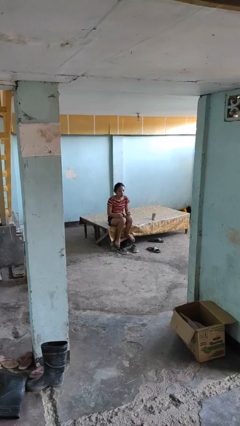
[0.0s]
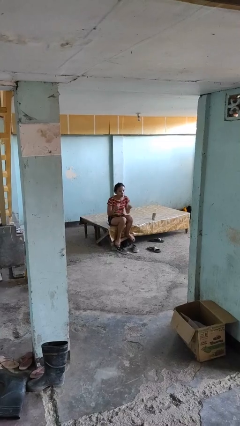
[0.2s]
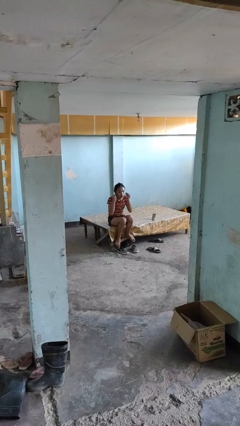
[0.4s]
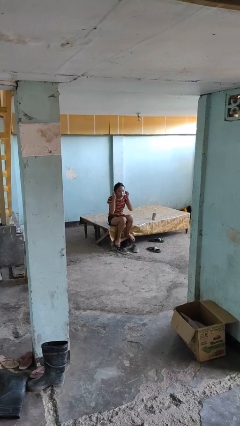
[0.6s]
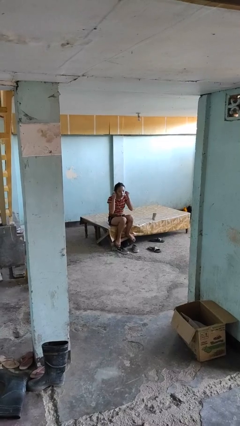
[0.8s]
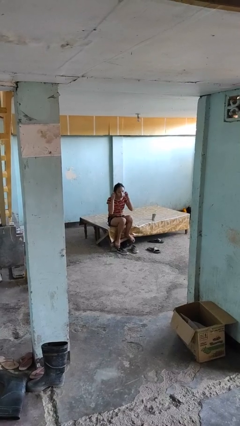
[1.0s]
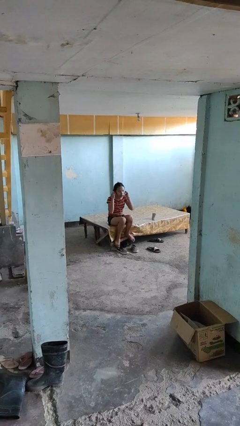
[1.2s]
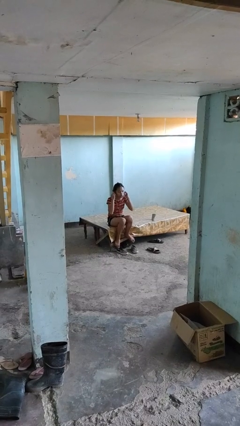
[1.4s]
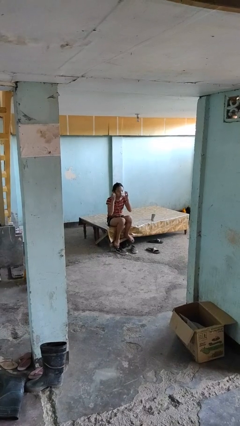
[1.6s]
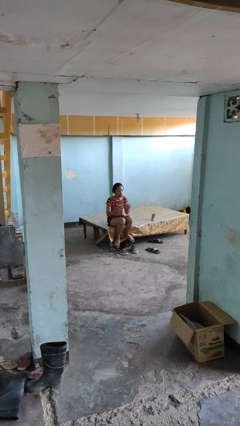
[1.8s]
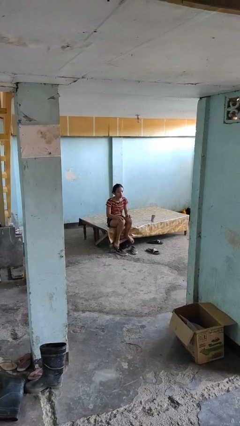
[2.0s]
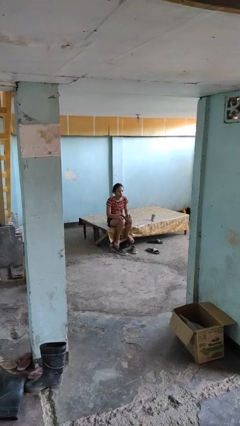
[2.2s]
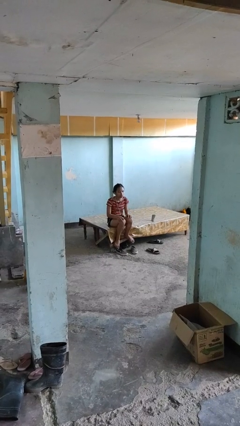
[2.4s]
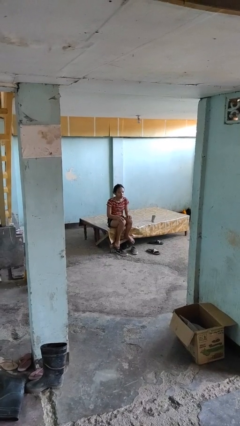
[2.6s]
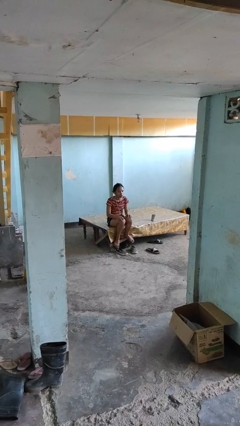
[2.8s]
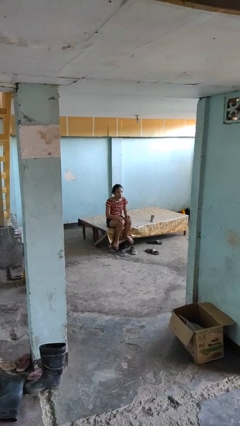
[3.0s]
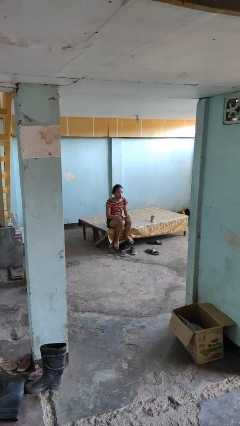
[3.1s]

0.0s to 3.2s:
person puts on headphones

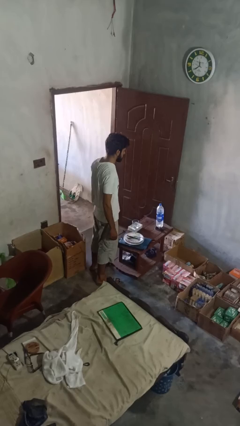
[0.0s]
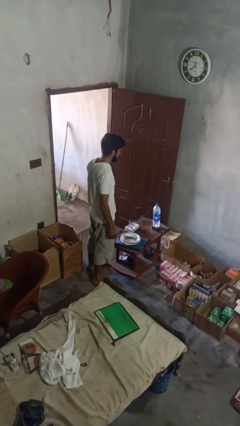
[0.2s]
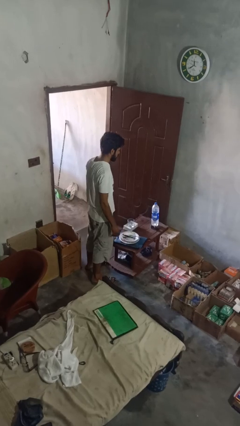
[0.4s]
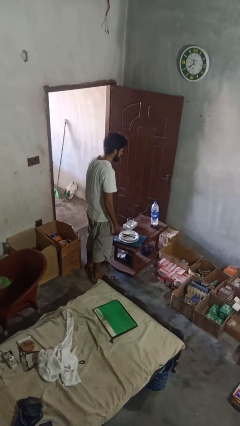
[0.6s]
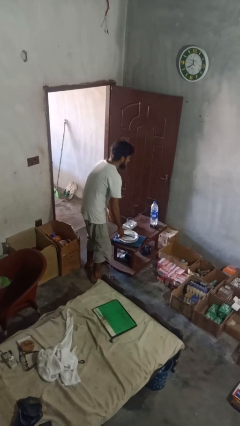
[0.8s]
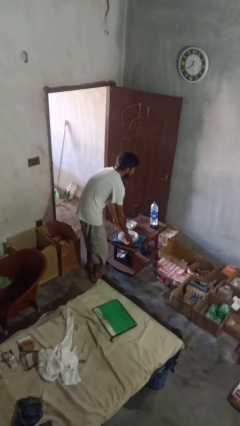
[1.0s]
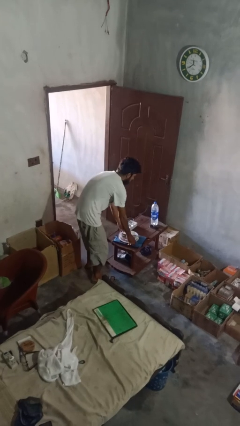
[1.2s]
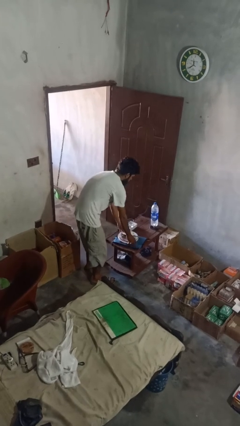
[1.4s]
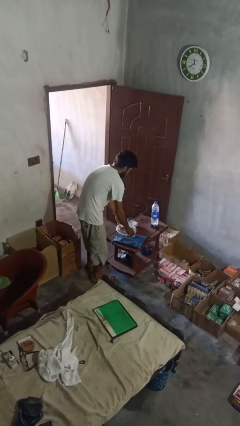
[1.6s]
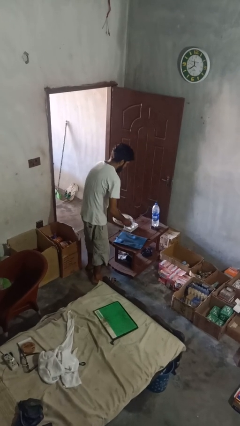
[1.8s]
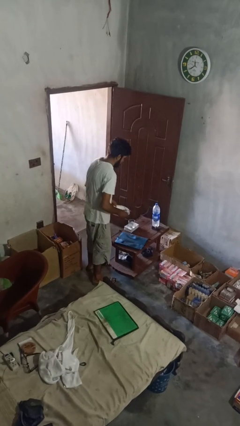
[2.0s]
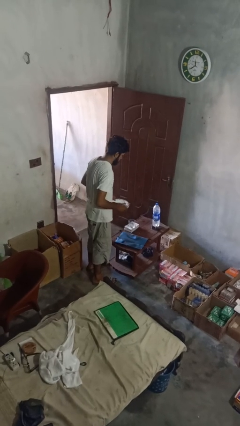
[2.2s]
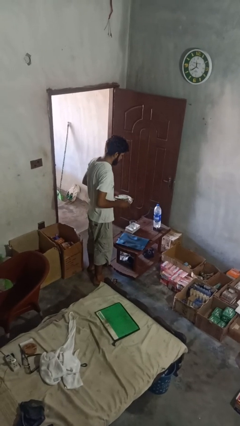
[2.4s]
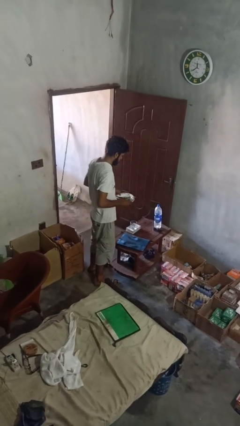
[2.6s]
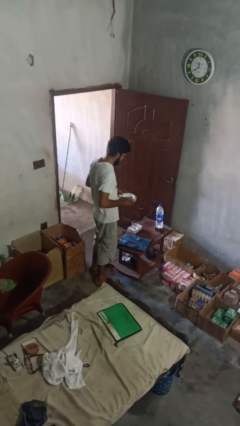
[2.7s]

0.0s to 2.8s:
person picks up object from countertop

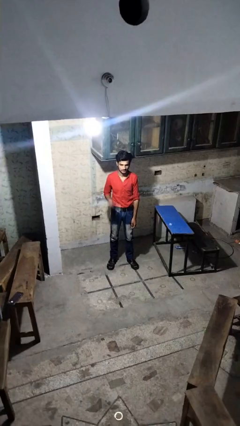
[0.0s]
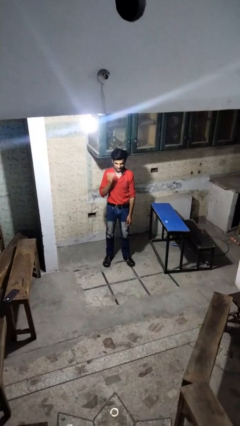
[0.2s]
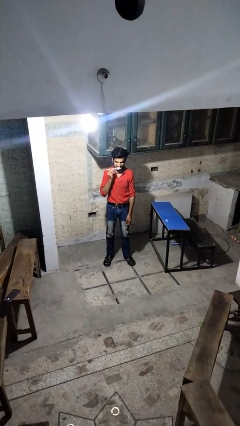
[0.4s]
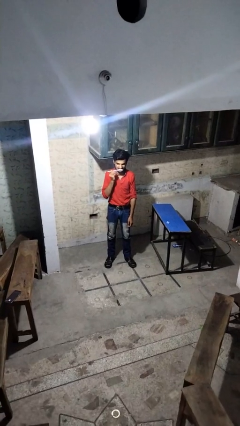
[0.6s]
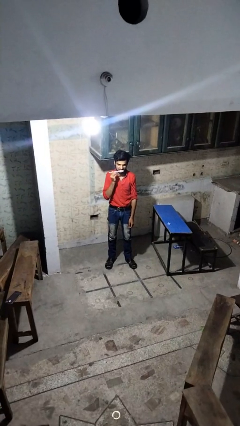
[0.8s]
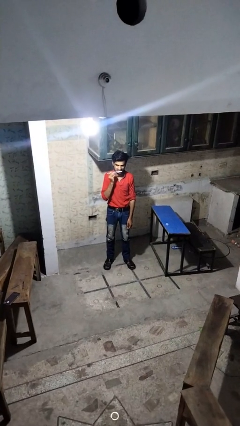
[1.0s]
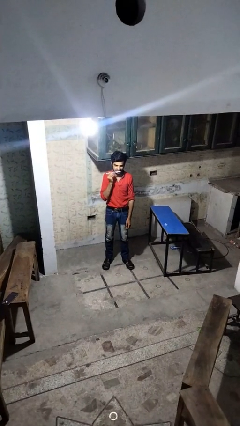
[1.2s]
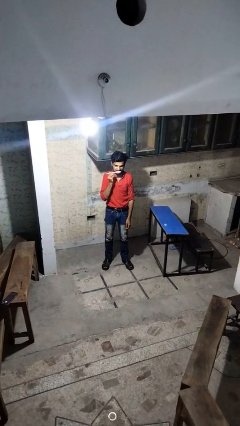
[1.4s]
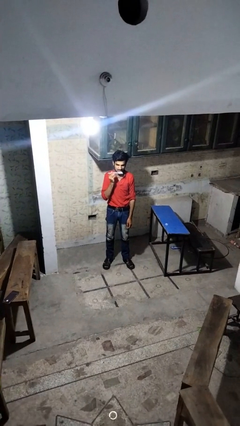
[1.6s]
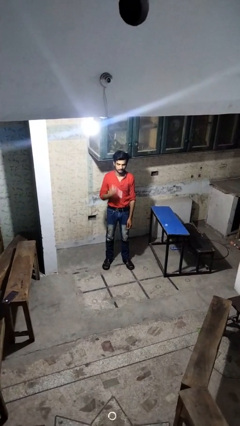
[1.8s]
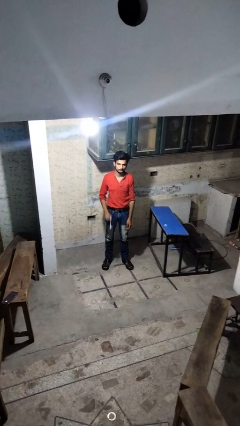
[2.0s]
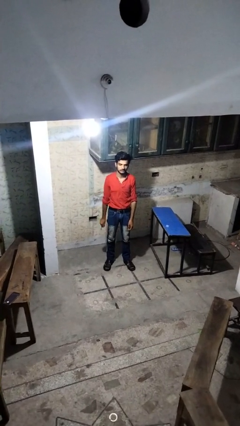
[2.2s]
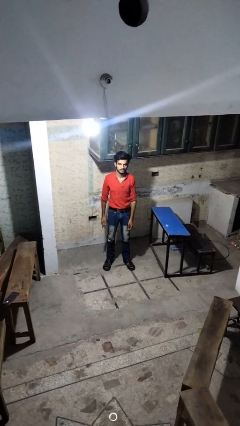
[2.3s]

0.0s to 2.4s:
person brushes teeth

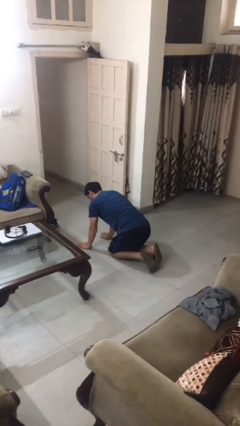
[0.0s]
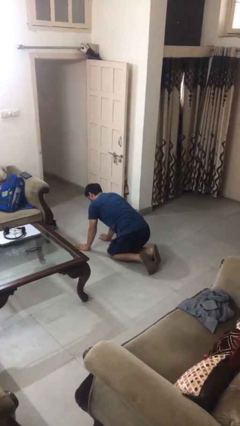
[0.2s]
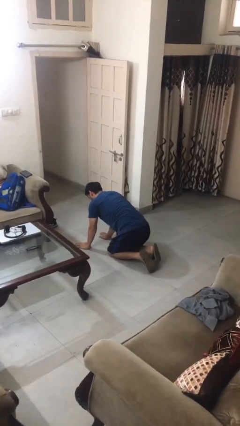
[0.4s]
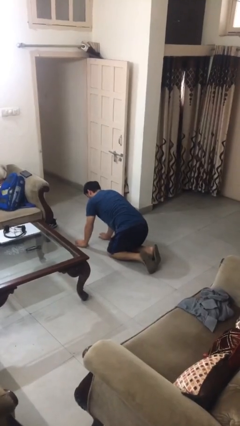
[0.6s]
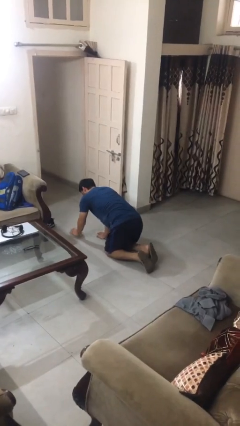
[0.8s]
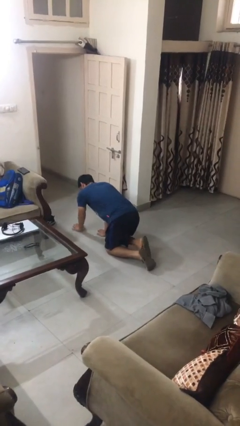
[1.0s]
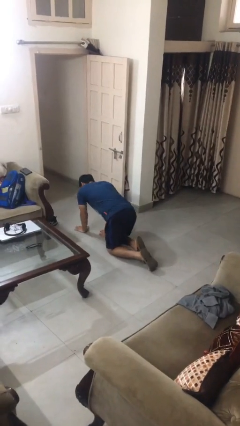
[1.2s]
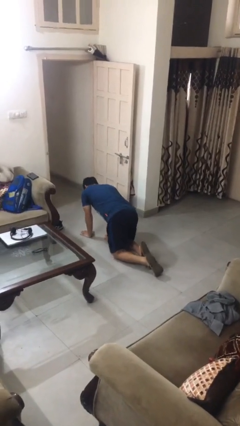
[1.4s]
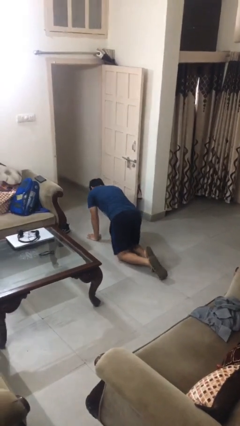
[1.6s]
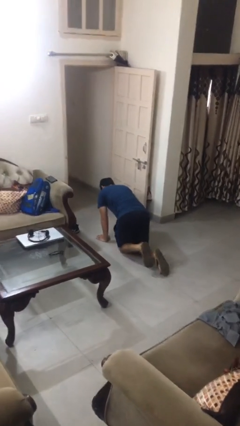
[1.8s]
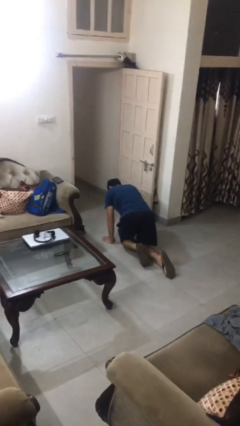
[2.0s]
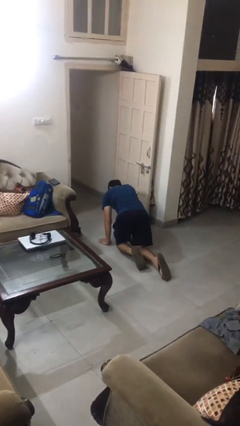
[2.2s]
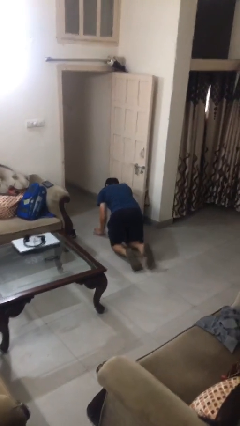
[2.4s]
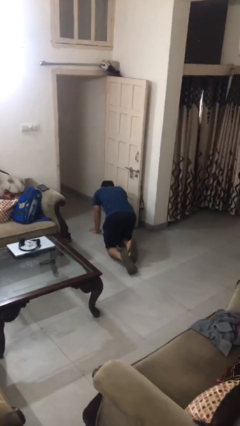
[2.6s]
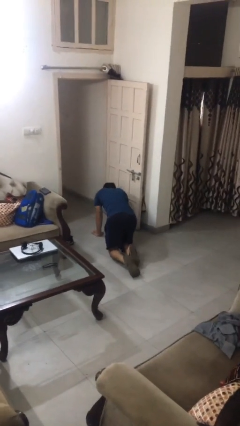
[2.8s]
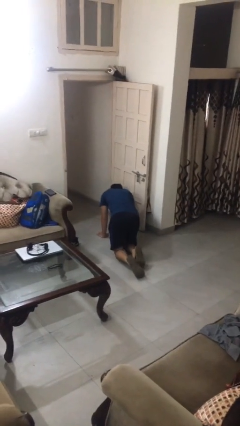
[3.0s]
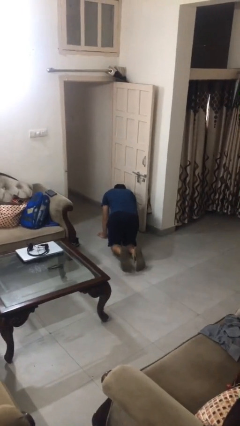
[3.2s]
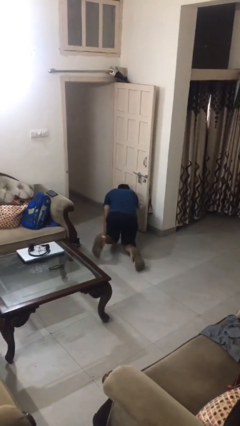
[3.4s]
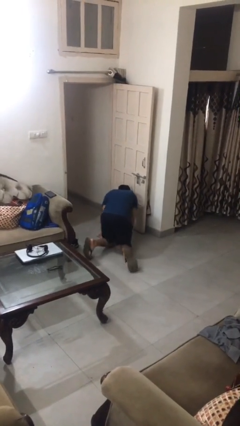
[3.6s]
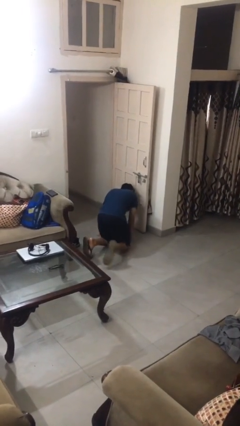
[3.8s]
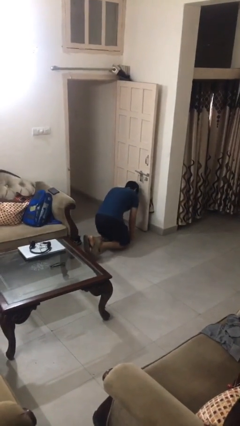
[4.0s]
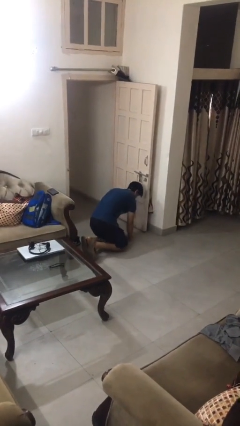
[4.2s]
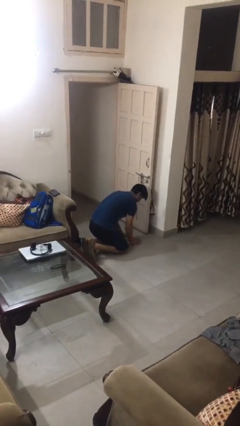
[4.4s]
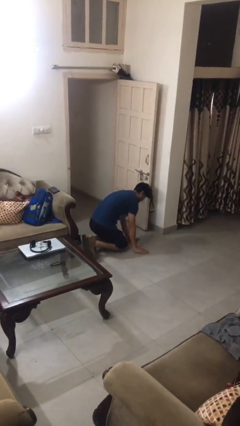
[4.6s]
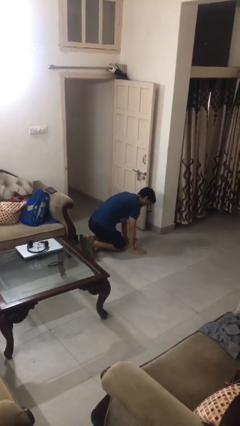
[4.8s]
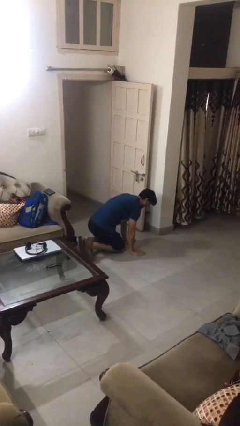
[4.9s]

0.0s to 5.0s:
person crawls

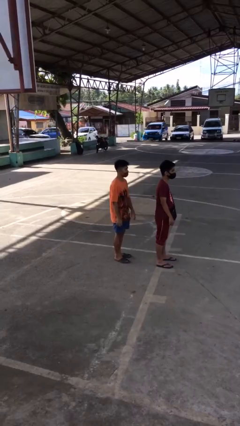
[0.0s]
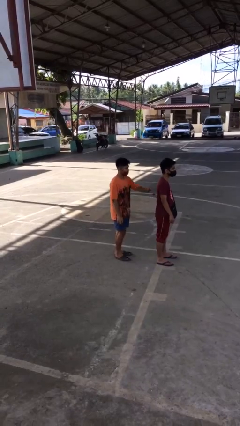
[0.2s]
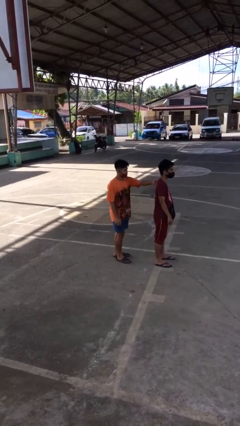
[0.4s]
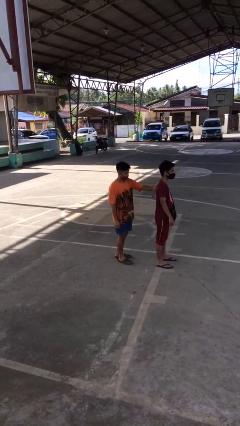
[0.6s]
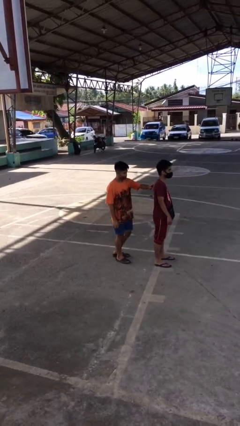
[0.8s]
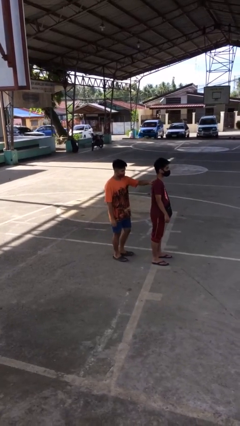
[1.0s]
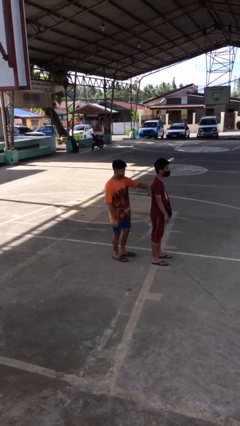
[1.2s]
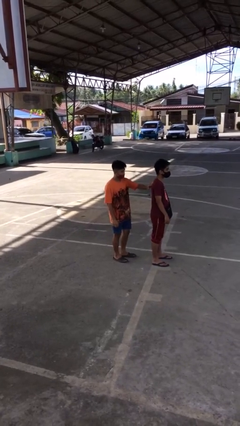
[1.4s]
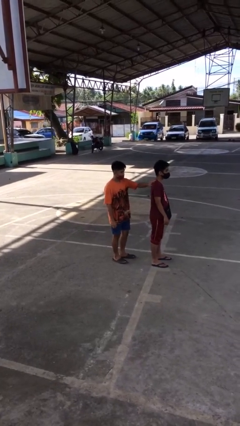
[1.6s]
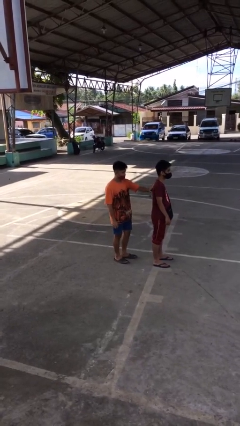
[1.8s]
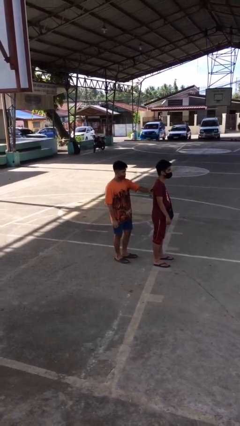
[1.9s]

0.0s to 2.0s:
person touches back of person

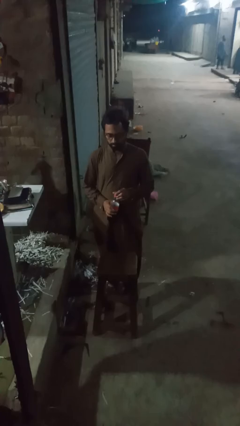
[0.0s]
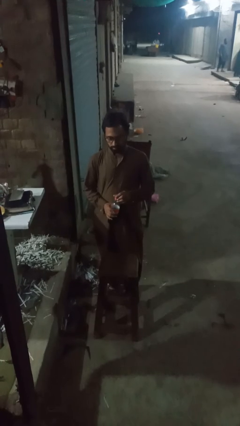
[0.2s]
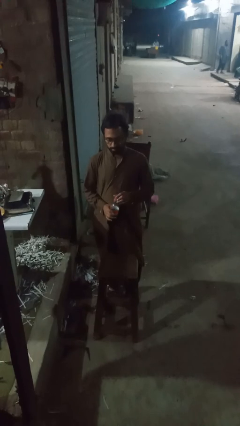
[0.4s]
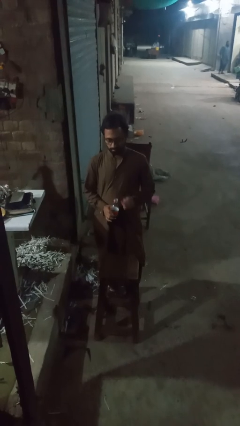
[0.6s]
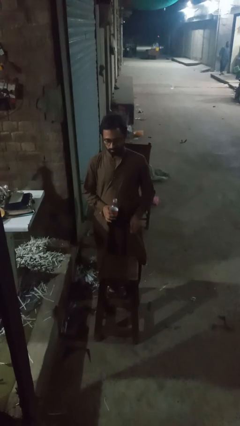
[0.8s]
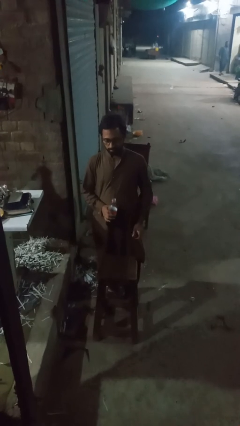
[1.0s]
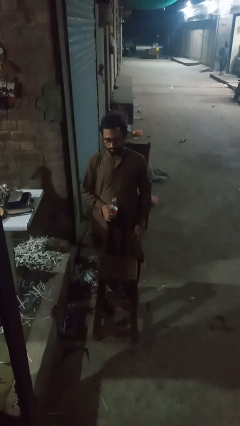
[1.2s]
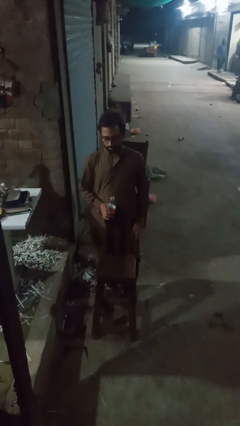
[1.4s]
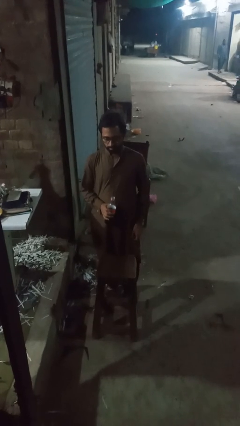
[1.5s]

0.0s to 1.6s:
person unscrews lid from bottle

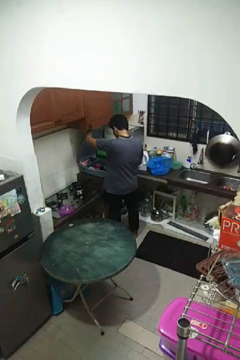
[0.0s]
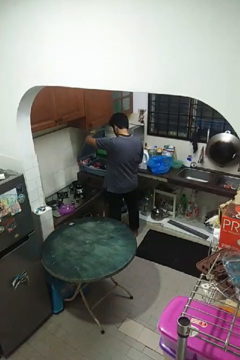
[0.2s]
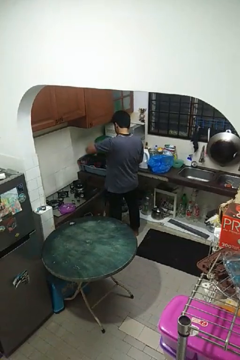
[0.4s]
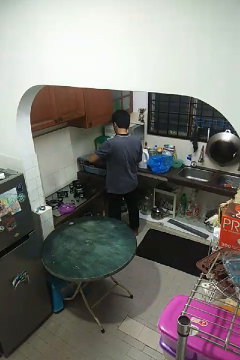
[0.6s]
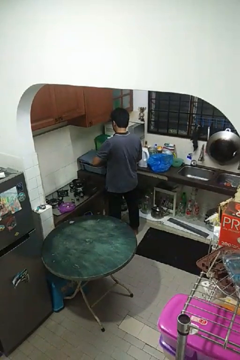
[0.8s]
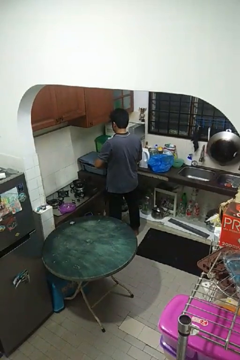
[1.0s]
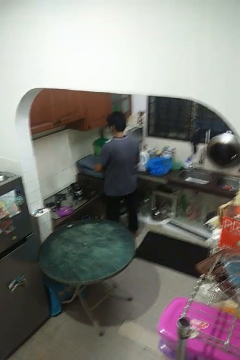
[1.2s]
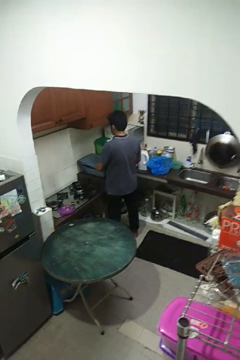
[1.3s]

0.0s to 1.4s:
person closes dishwasher
